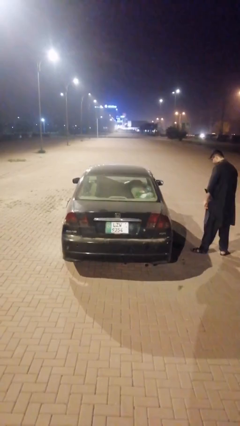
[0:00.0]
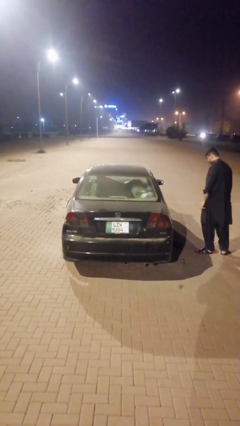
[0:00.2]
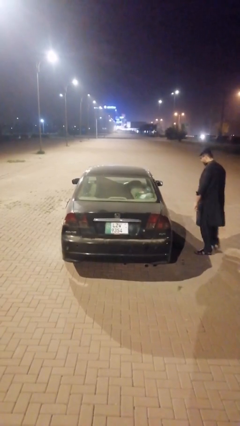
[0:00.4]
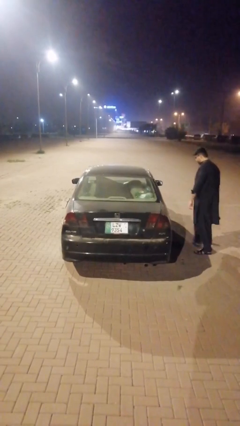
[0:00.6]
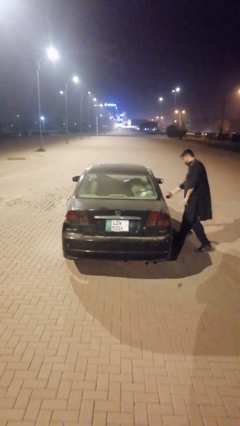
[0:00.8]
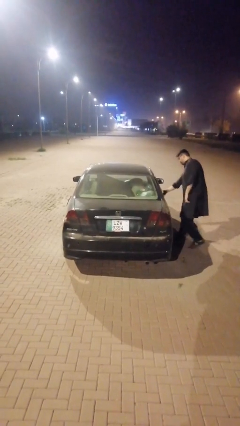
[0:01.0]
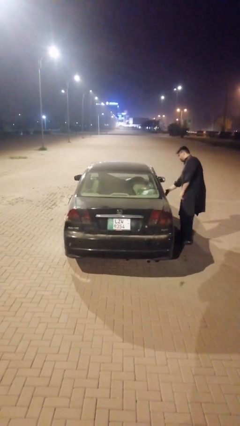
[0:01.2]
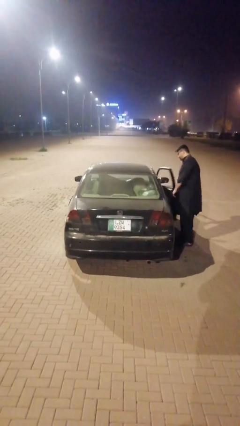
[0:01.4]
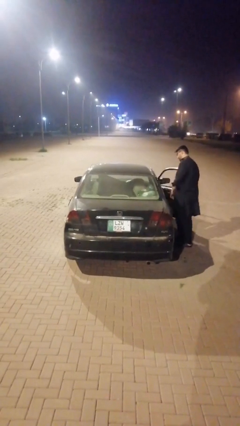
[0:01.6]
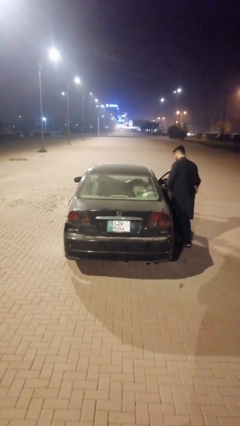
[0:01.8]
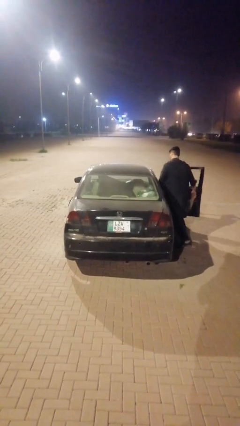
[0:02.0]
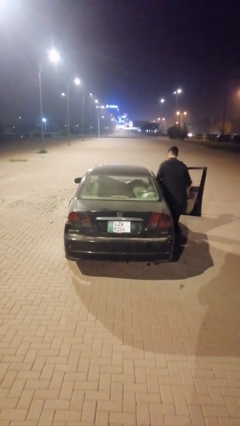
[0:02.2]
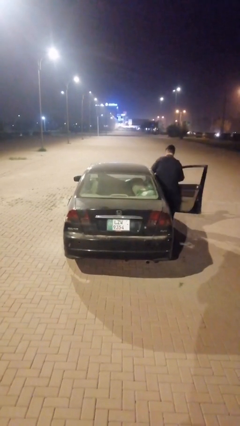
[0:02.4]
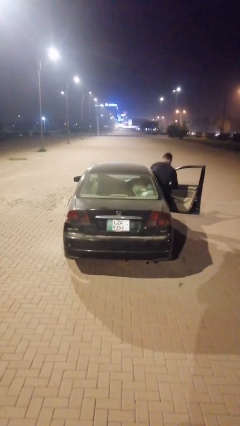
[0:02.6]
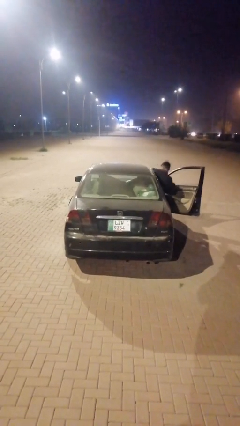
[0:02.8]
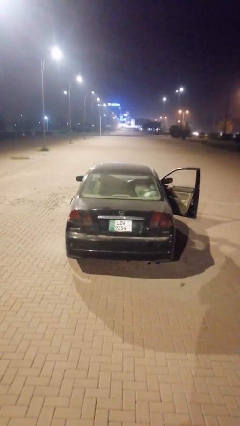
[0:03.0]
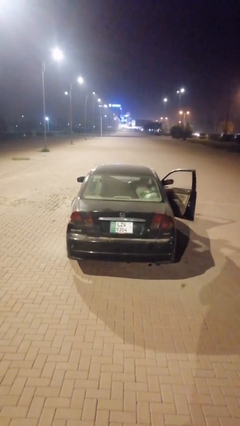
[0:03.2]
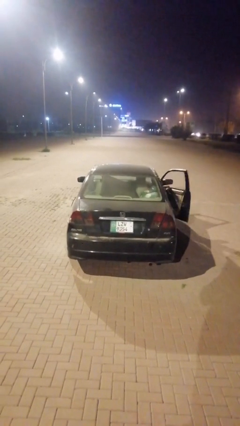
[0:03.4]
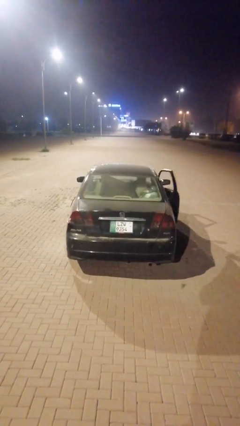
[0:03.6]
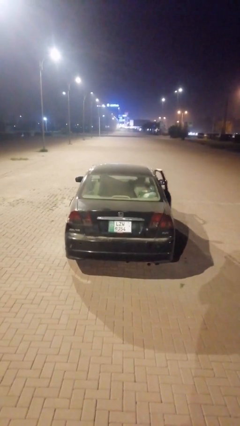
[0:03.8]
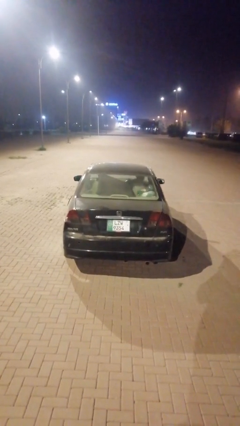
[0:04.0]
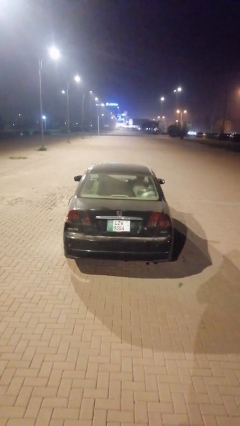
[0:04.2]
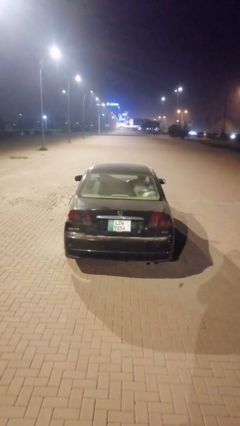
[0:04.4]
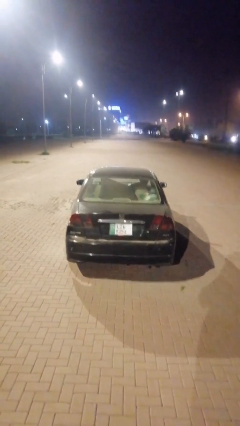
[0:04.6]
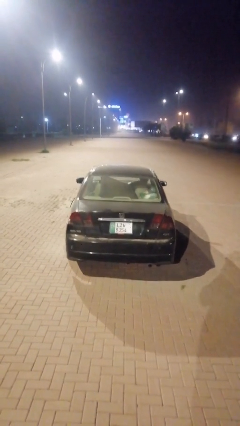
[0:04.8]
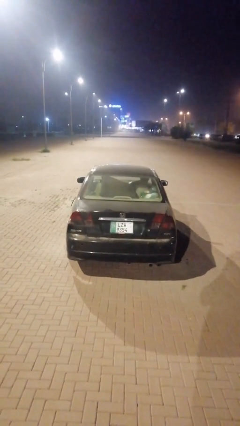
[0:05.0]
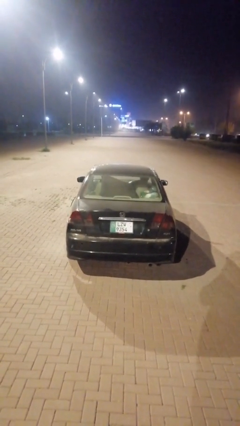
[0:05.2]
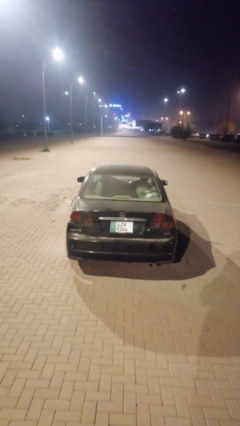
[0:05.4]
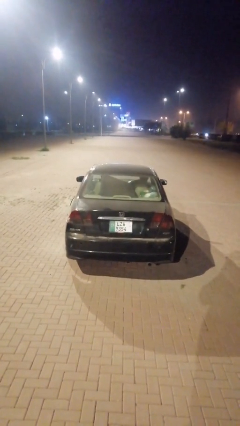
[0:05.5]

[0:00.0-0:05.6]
car picks up person

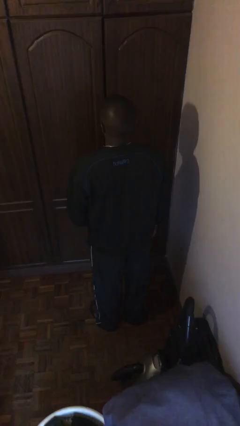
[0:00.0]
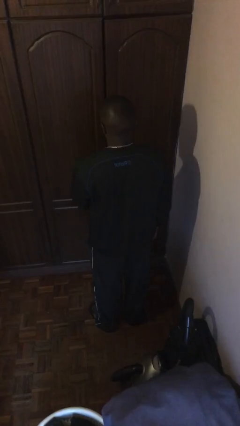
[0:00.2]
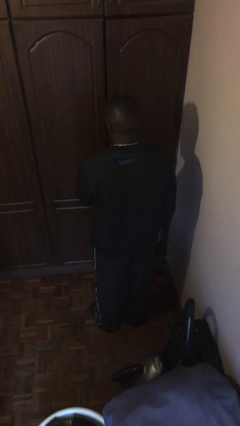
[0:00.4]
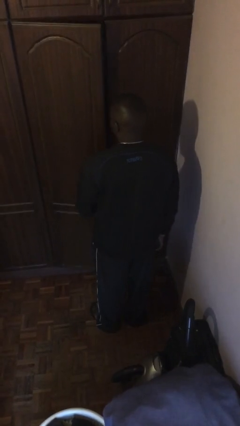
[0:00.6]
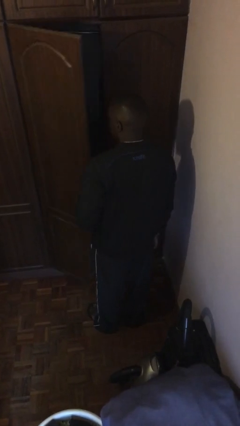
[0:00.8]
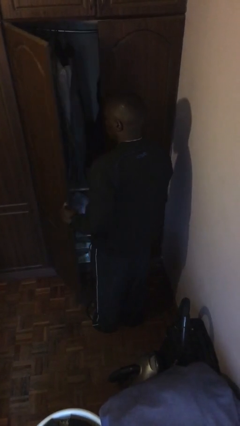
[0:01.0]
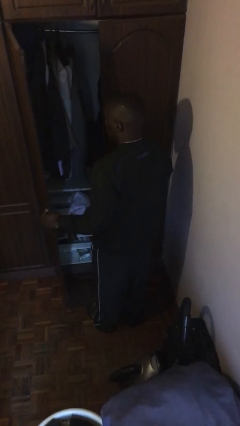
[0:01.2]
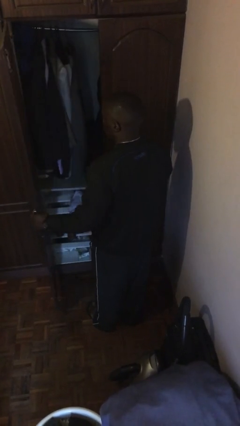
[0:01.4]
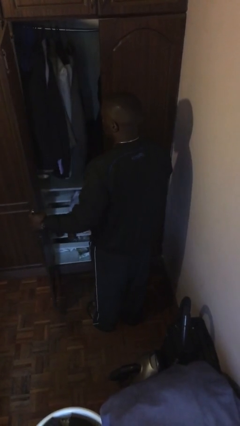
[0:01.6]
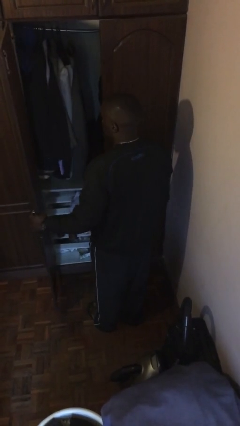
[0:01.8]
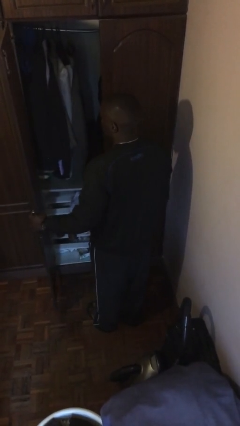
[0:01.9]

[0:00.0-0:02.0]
person opens closet door

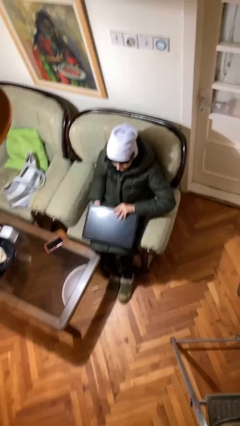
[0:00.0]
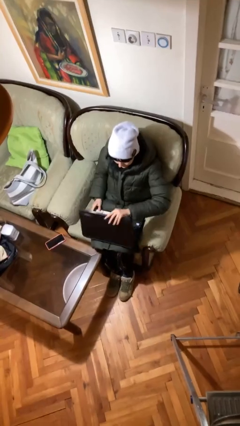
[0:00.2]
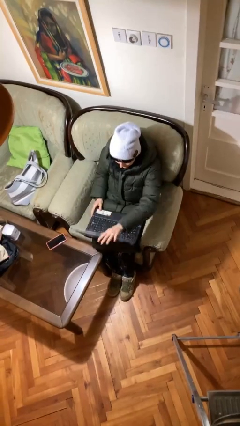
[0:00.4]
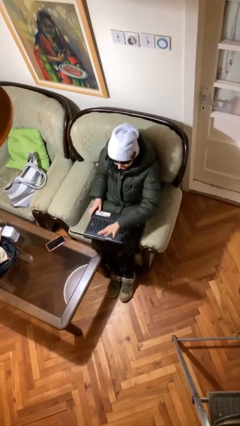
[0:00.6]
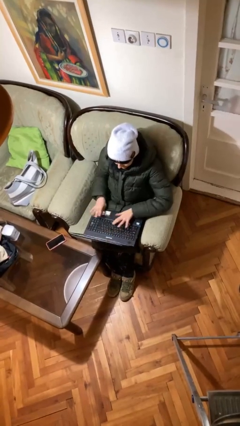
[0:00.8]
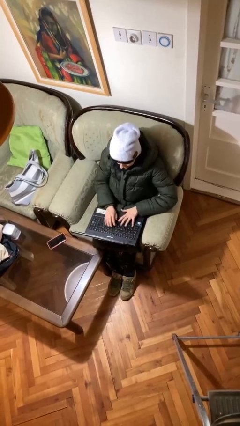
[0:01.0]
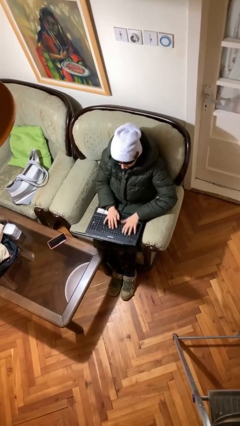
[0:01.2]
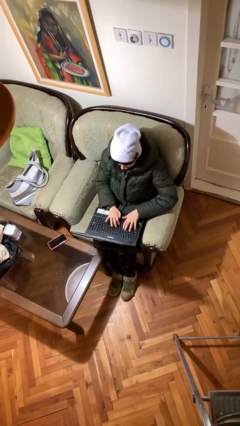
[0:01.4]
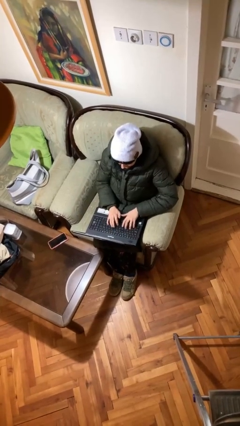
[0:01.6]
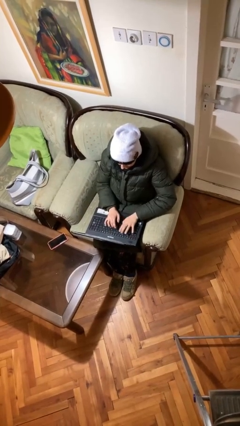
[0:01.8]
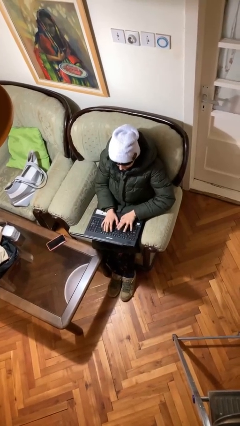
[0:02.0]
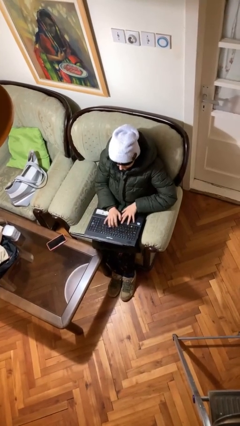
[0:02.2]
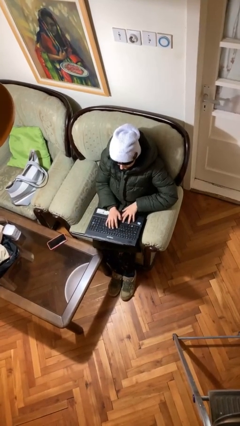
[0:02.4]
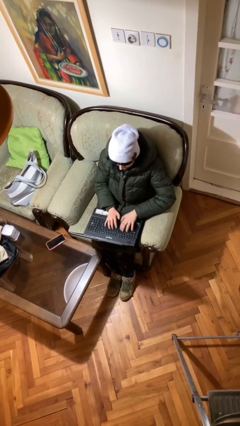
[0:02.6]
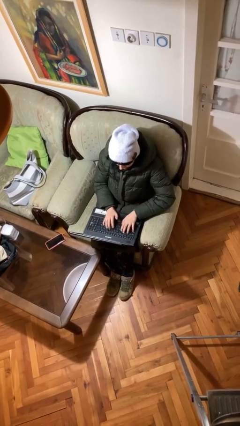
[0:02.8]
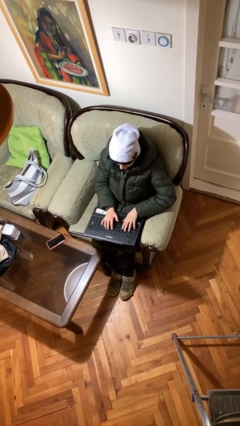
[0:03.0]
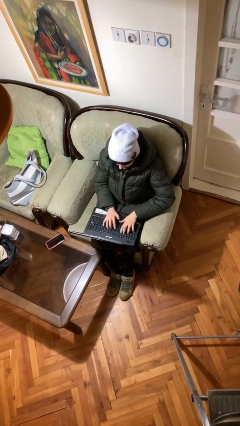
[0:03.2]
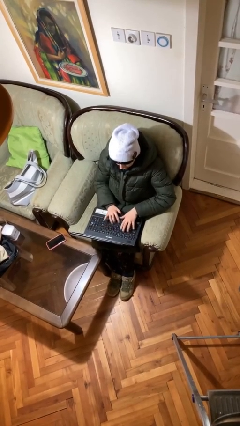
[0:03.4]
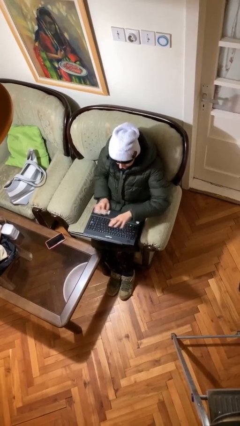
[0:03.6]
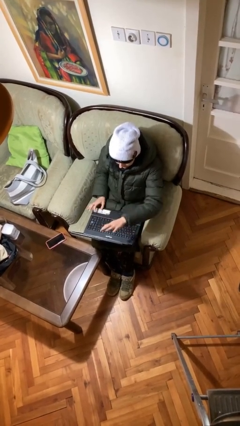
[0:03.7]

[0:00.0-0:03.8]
person interacts with laptop

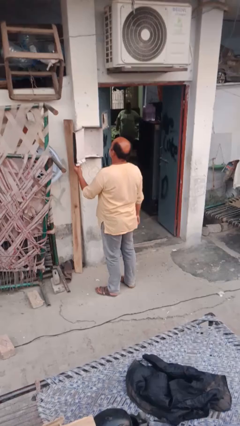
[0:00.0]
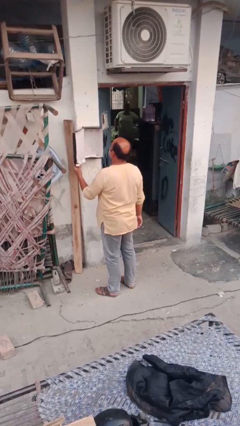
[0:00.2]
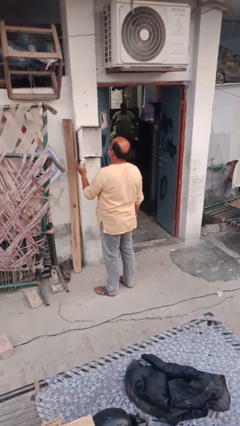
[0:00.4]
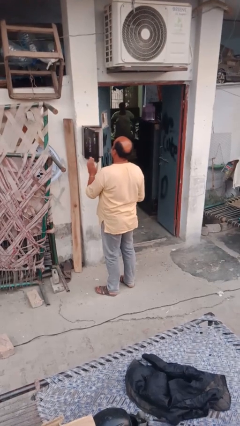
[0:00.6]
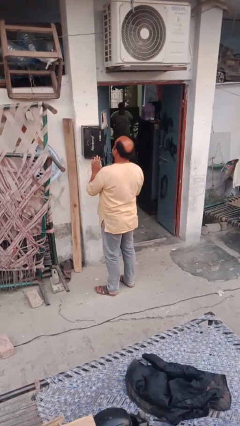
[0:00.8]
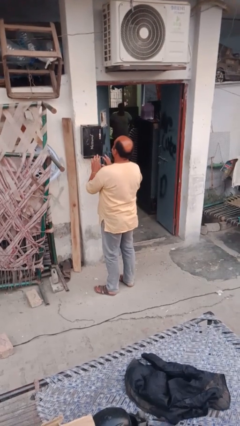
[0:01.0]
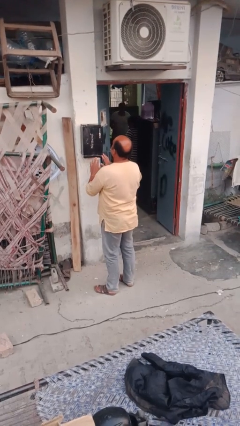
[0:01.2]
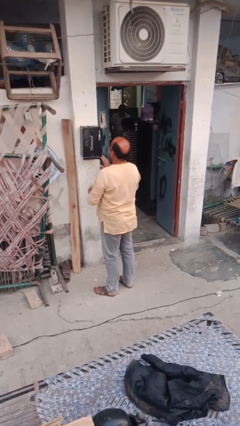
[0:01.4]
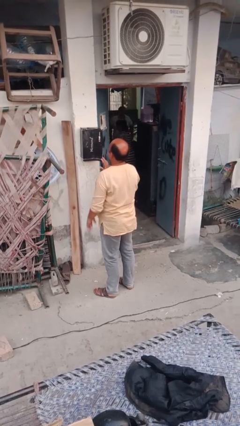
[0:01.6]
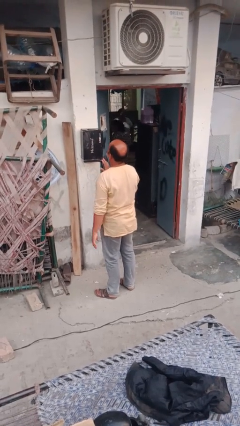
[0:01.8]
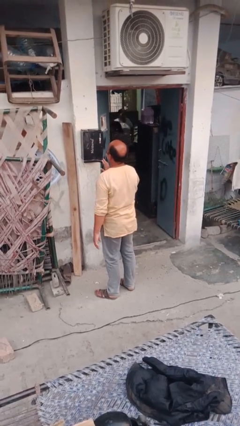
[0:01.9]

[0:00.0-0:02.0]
person closes mailbox

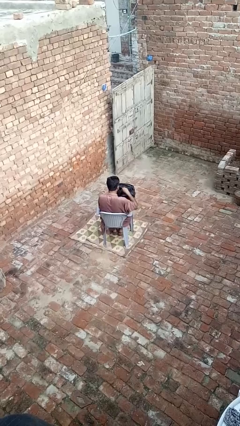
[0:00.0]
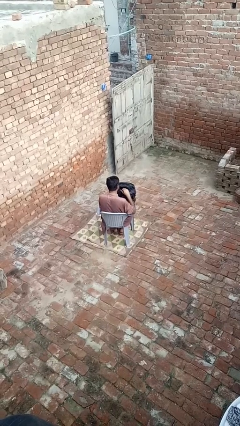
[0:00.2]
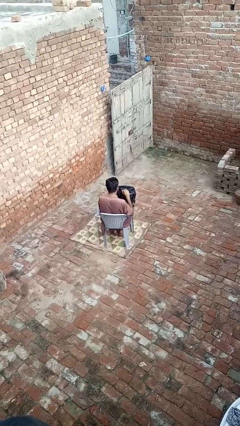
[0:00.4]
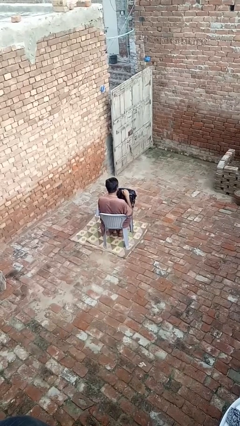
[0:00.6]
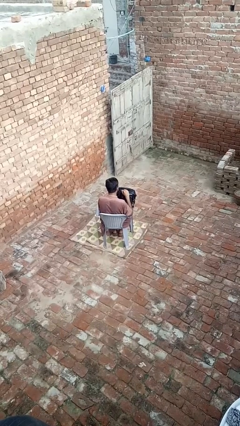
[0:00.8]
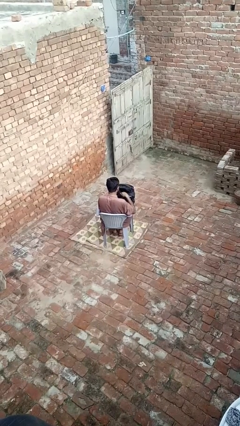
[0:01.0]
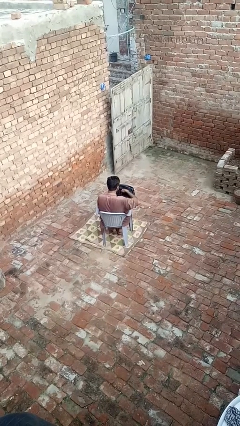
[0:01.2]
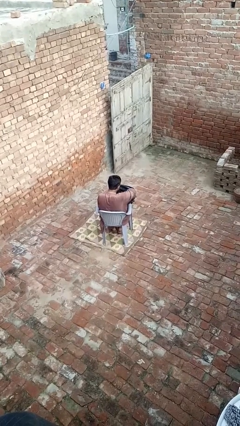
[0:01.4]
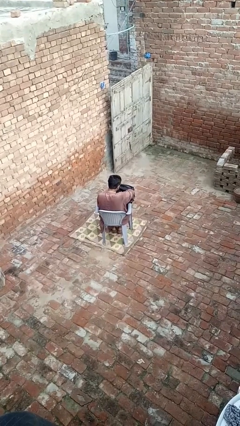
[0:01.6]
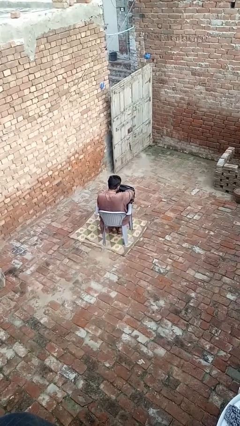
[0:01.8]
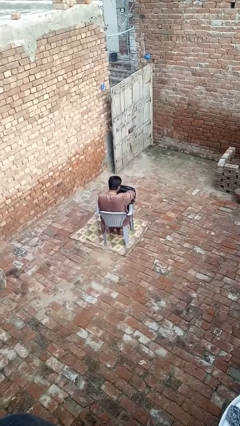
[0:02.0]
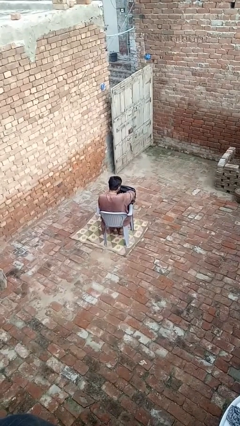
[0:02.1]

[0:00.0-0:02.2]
person searches in backpack

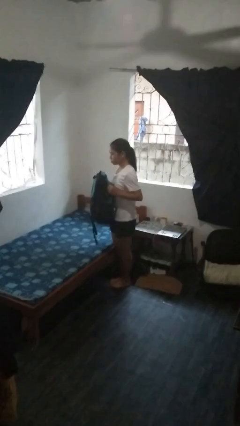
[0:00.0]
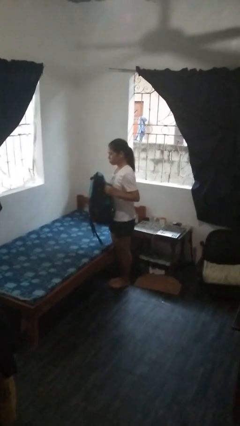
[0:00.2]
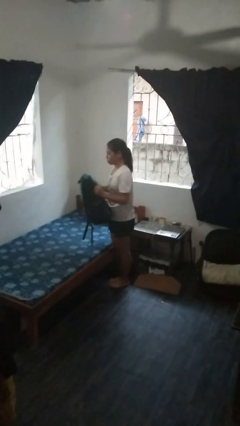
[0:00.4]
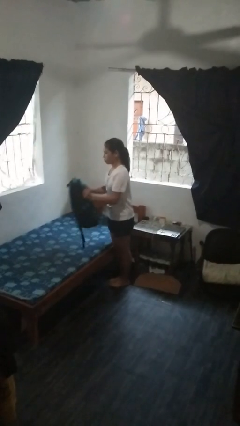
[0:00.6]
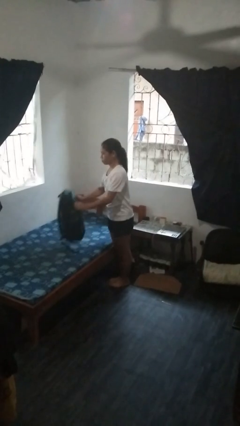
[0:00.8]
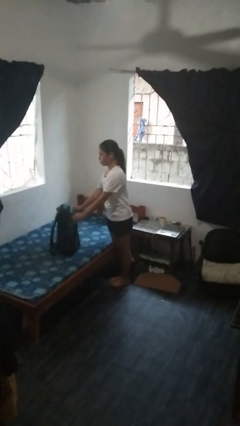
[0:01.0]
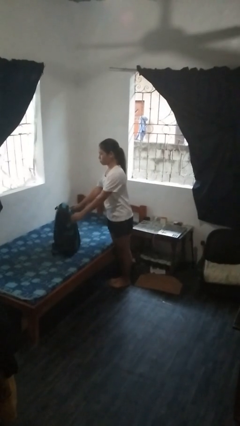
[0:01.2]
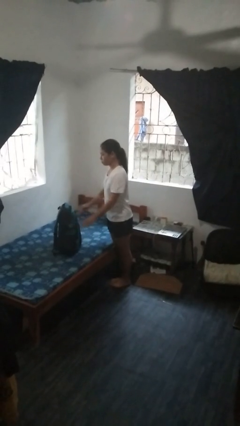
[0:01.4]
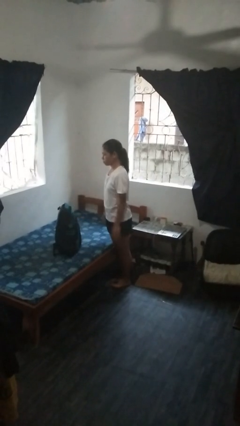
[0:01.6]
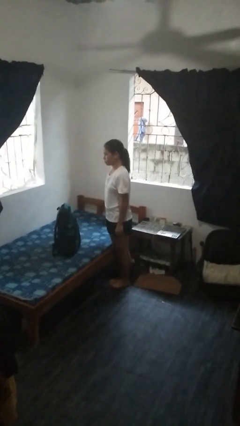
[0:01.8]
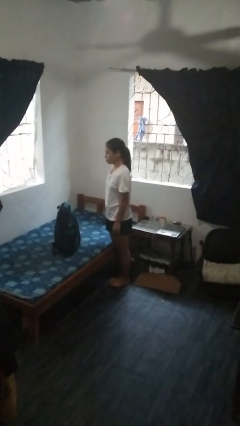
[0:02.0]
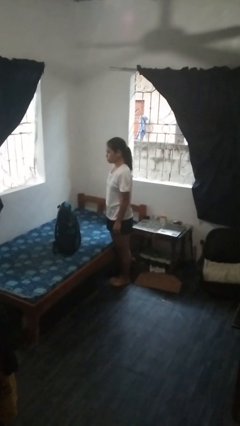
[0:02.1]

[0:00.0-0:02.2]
person puts down object on bed
